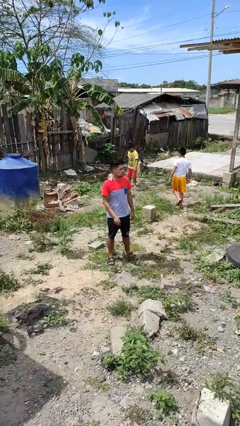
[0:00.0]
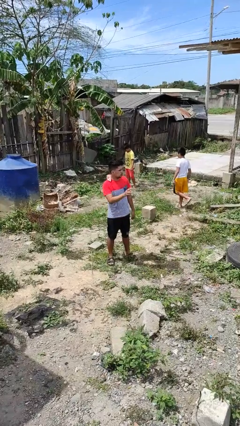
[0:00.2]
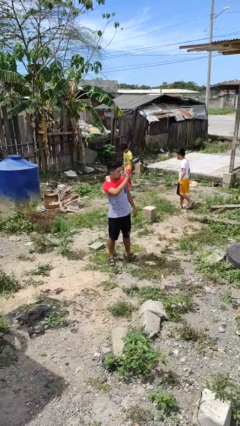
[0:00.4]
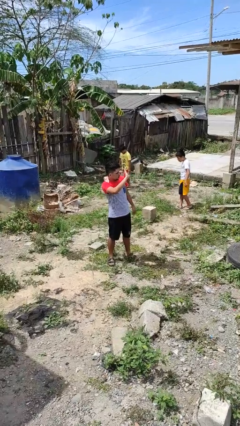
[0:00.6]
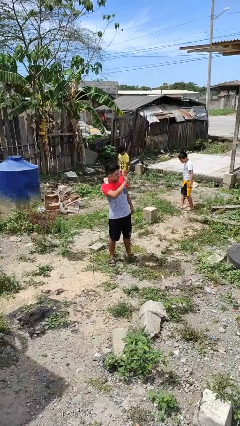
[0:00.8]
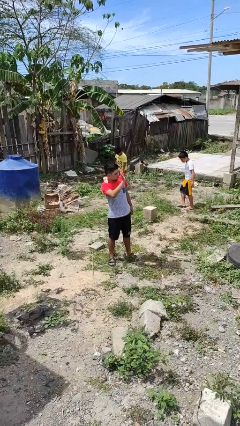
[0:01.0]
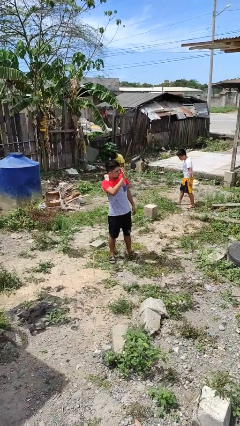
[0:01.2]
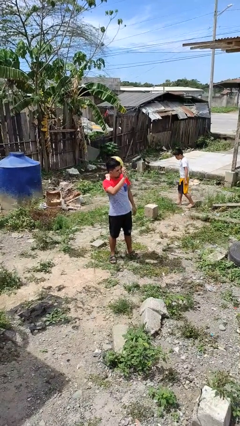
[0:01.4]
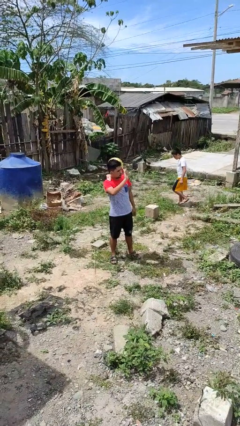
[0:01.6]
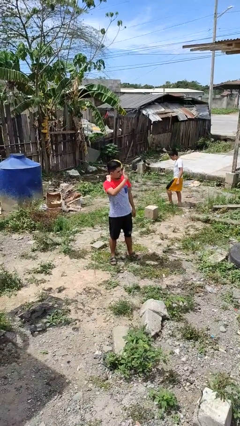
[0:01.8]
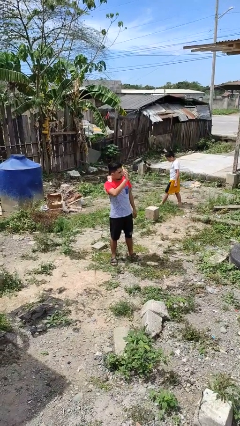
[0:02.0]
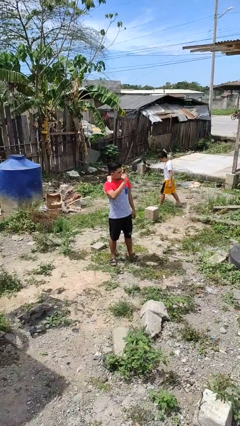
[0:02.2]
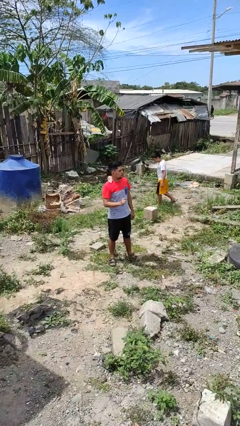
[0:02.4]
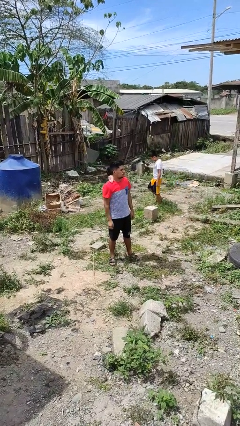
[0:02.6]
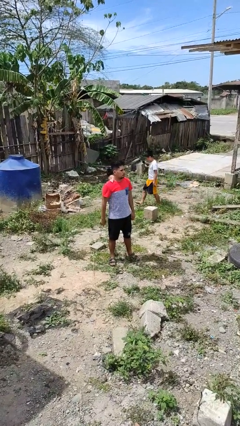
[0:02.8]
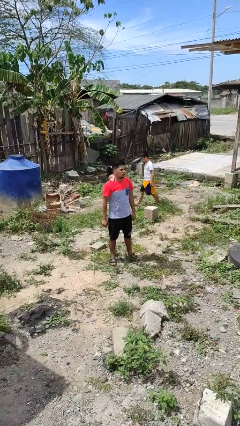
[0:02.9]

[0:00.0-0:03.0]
person waves at person

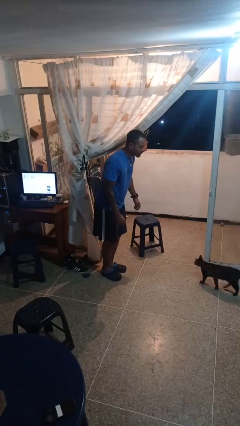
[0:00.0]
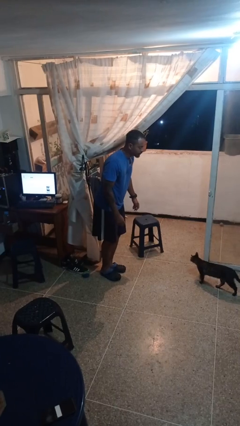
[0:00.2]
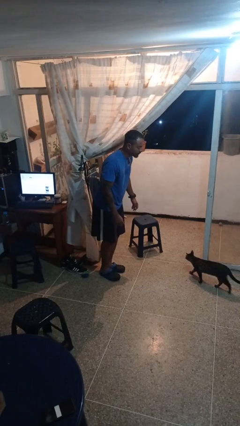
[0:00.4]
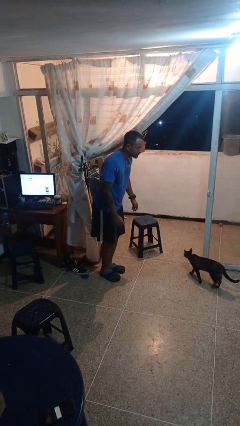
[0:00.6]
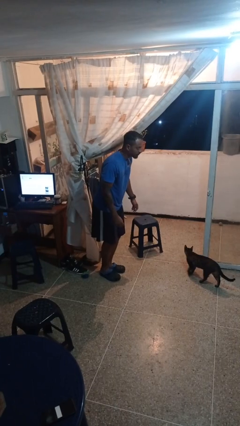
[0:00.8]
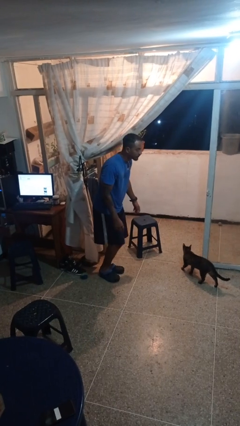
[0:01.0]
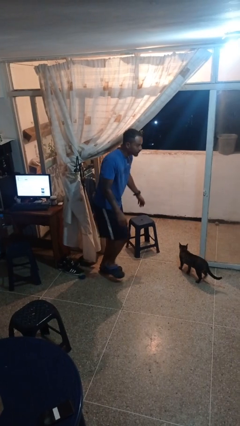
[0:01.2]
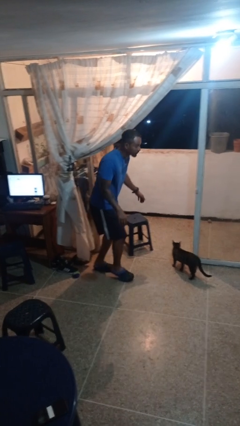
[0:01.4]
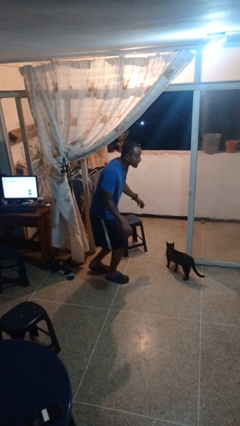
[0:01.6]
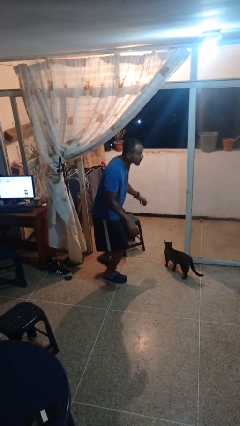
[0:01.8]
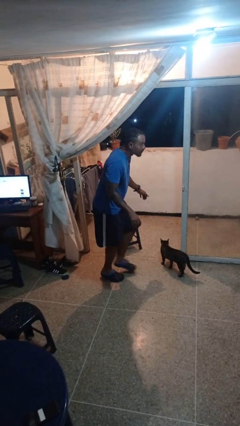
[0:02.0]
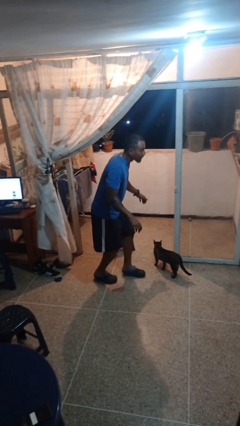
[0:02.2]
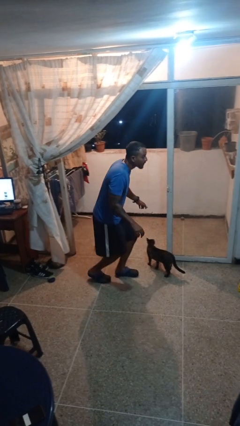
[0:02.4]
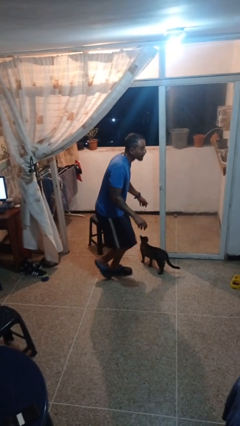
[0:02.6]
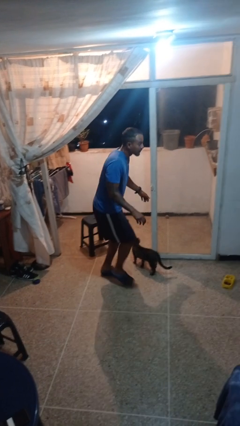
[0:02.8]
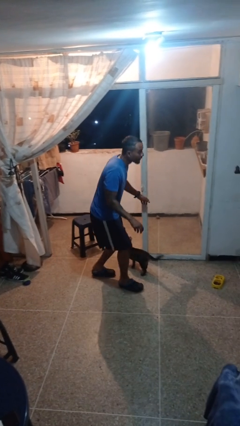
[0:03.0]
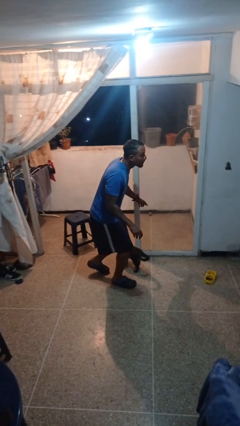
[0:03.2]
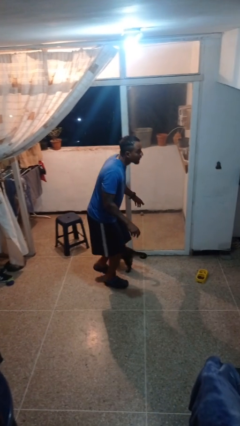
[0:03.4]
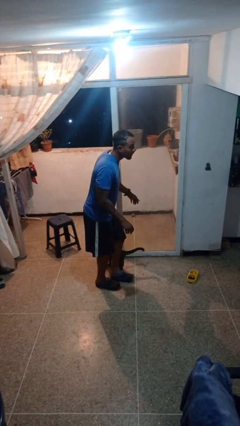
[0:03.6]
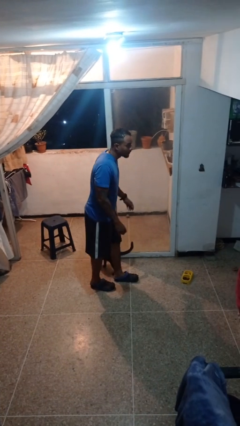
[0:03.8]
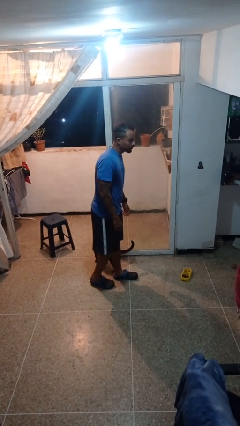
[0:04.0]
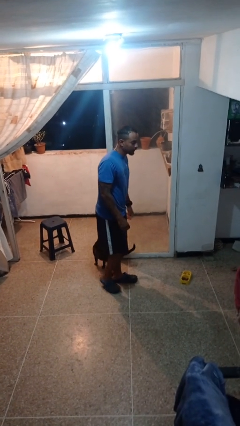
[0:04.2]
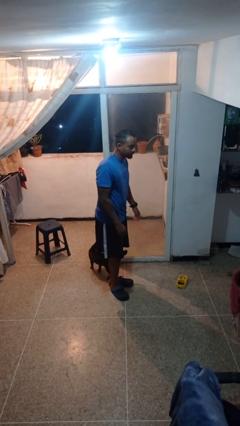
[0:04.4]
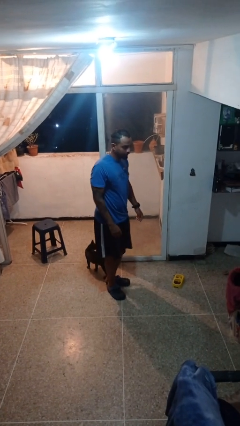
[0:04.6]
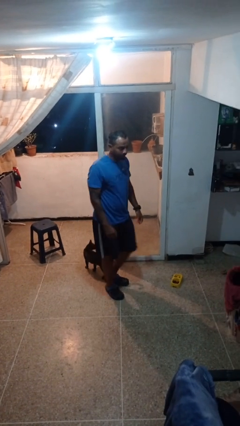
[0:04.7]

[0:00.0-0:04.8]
person walks tiptoe

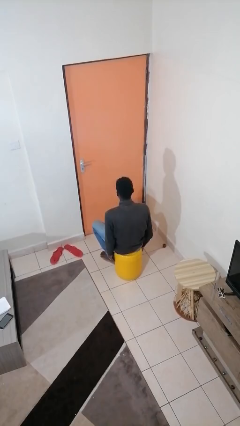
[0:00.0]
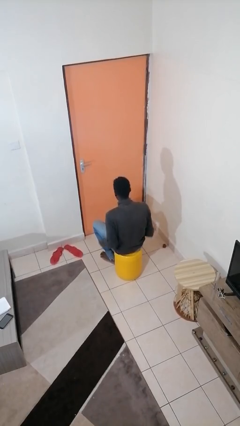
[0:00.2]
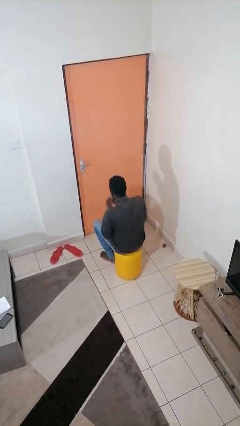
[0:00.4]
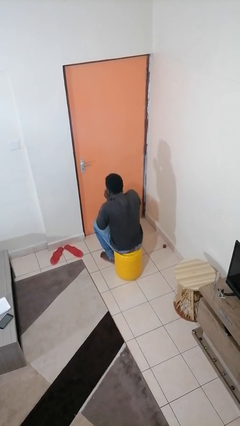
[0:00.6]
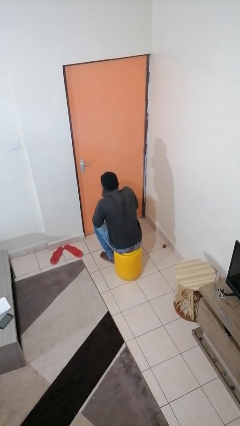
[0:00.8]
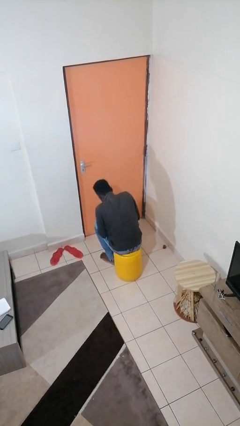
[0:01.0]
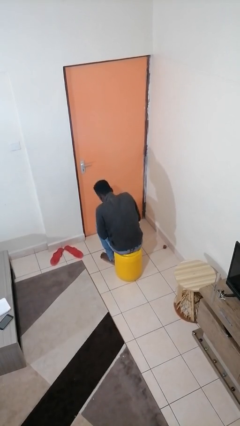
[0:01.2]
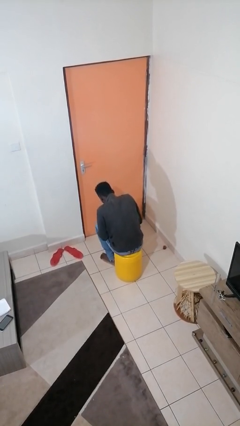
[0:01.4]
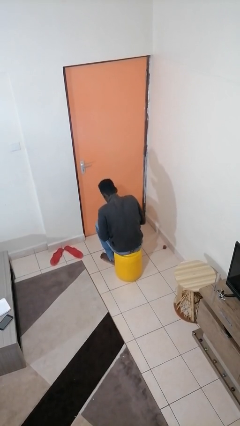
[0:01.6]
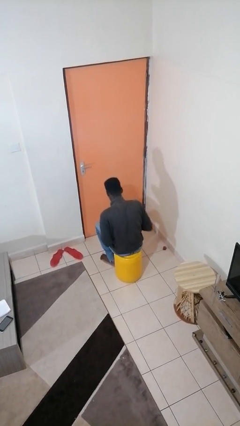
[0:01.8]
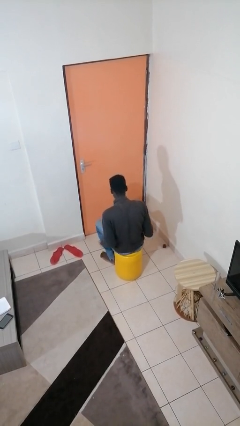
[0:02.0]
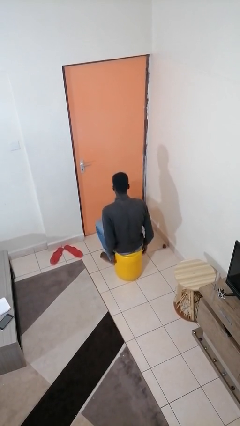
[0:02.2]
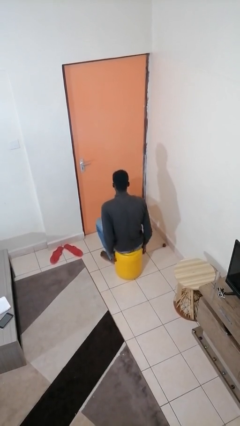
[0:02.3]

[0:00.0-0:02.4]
person sneezes into hand

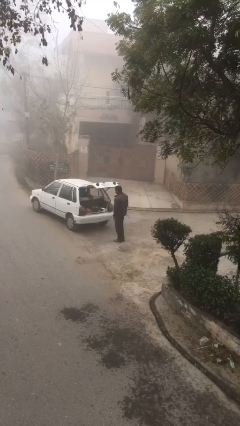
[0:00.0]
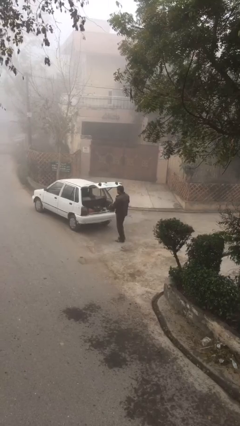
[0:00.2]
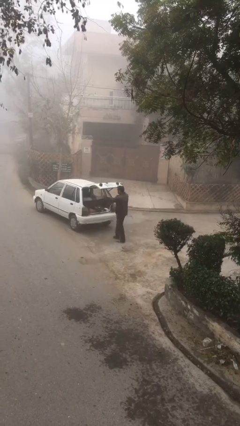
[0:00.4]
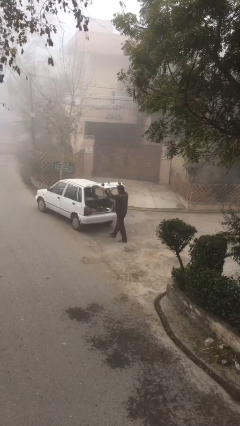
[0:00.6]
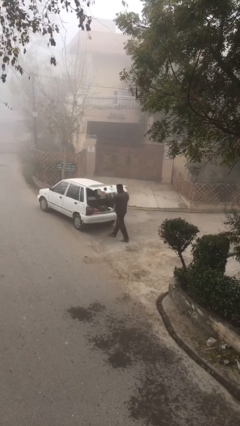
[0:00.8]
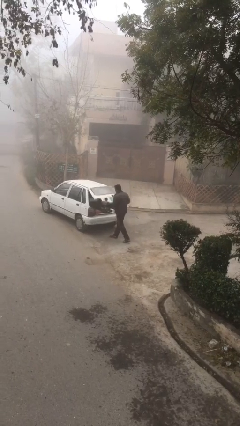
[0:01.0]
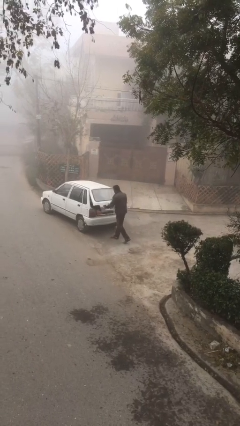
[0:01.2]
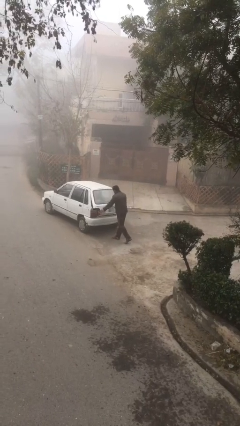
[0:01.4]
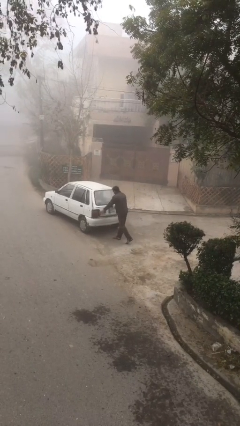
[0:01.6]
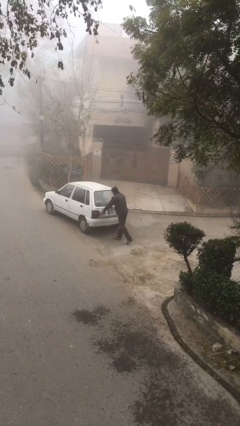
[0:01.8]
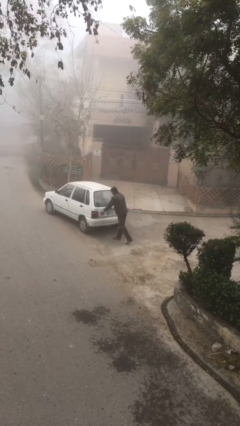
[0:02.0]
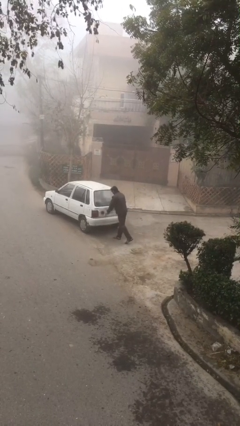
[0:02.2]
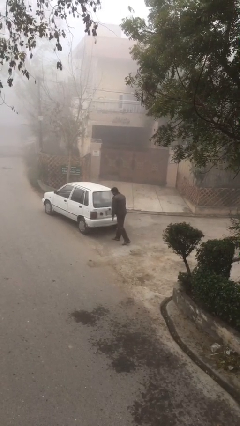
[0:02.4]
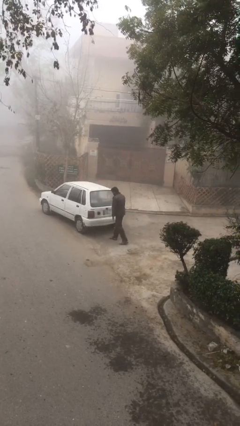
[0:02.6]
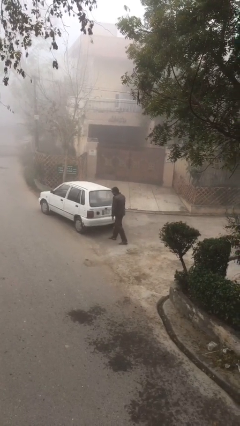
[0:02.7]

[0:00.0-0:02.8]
person closes car trunk

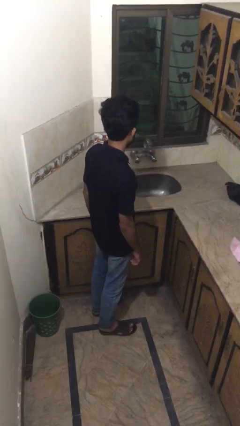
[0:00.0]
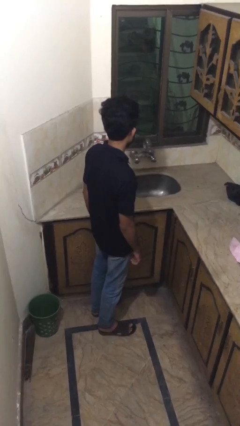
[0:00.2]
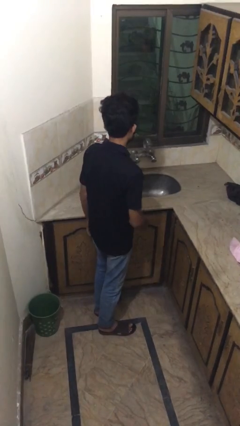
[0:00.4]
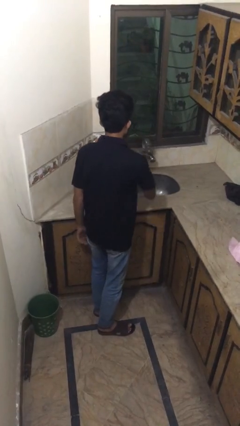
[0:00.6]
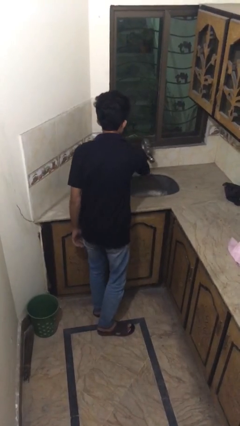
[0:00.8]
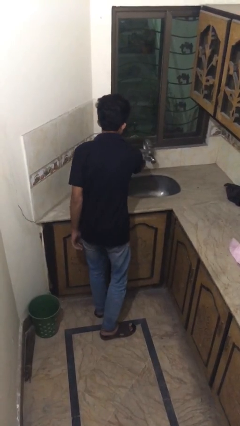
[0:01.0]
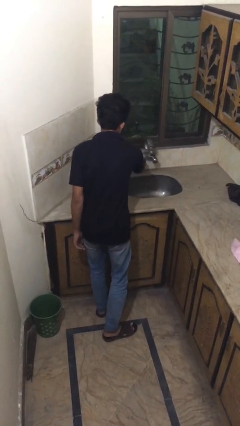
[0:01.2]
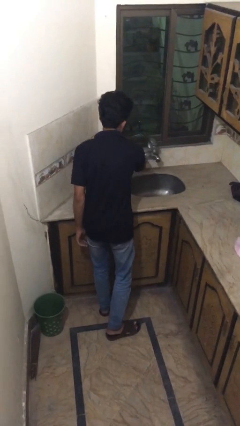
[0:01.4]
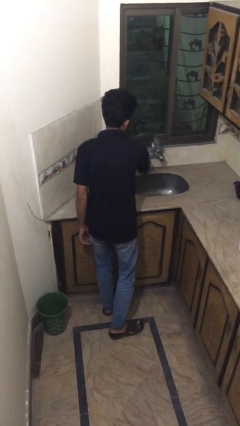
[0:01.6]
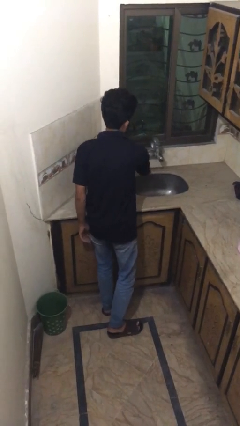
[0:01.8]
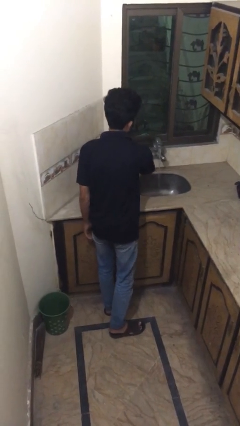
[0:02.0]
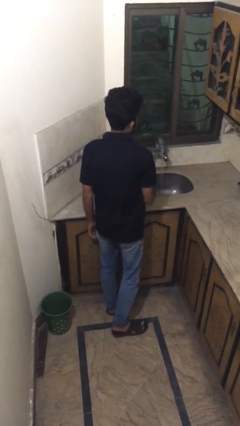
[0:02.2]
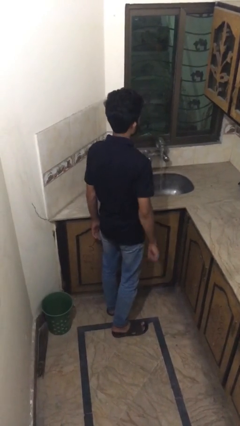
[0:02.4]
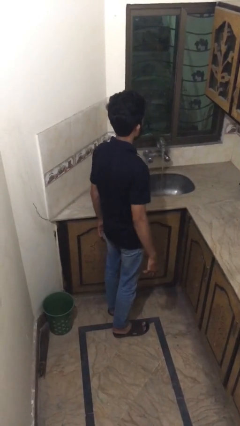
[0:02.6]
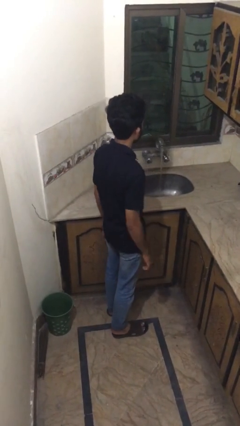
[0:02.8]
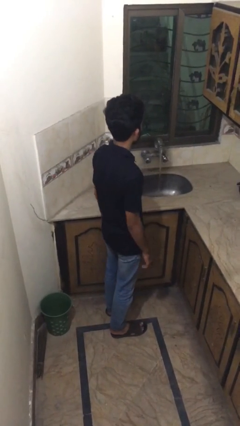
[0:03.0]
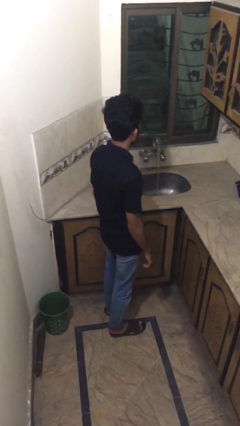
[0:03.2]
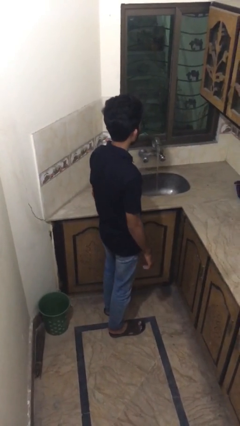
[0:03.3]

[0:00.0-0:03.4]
person turns on faucet

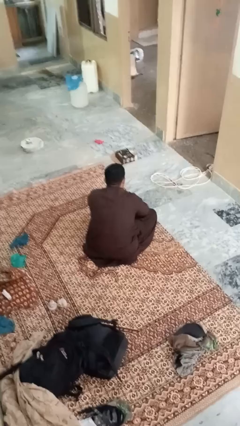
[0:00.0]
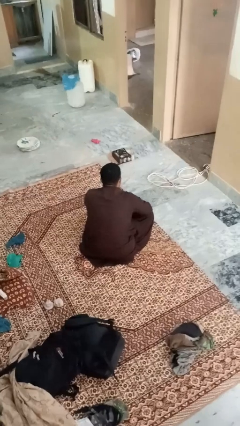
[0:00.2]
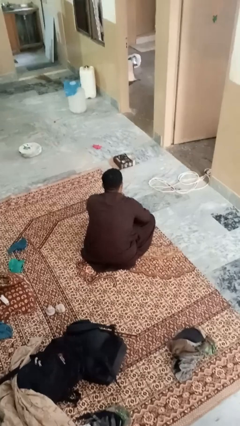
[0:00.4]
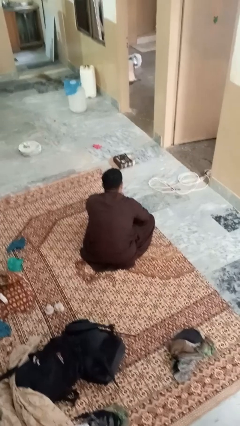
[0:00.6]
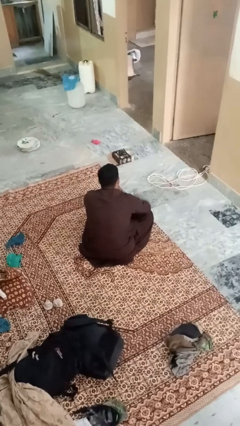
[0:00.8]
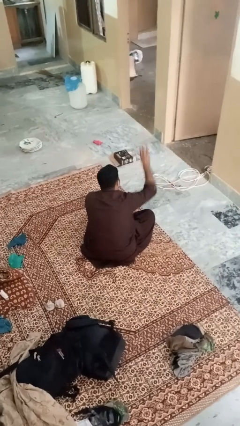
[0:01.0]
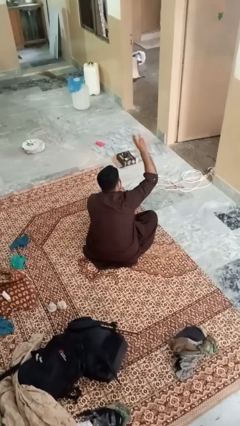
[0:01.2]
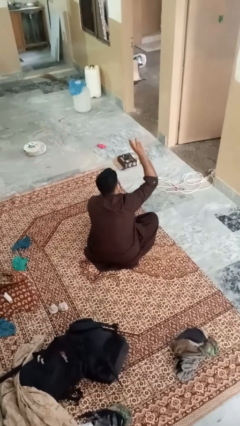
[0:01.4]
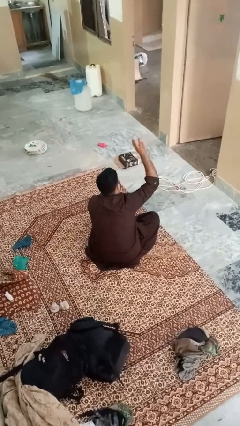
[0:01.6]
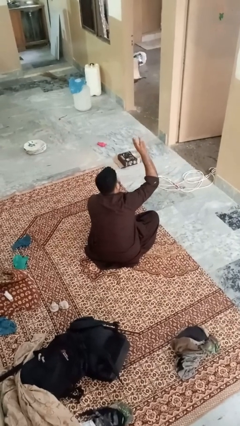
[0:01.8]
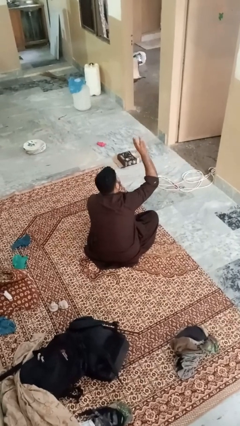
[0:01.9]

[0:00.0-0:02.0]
person gestures number three
